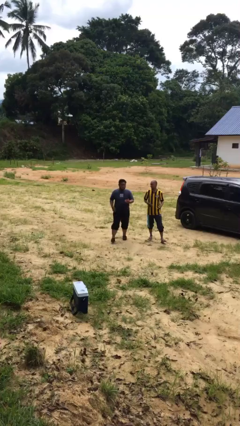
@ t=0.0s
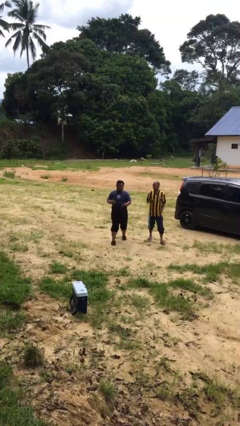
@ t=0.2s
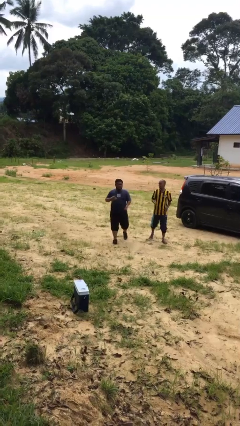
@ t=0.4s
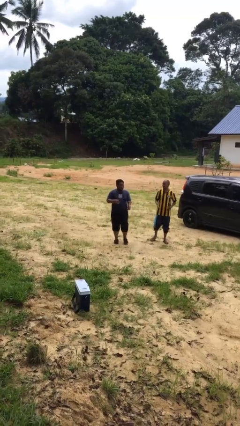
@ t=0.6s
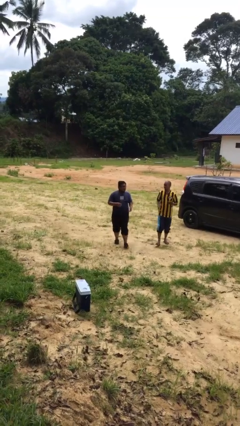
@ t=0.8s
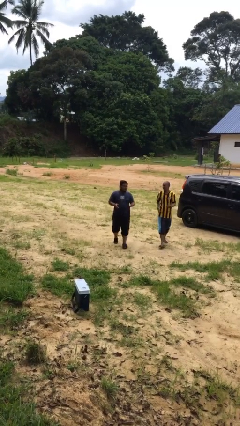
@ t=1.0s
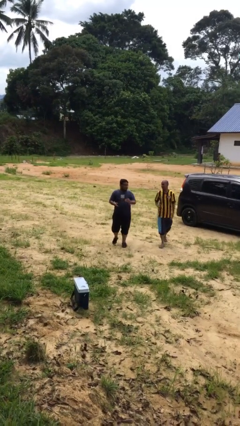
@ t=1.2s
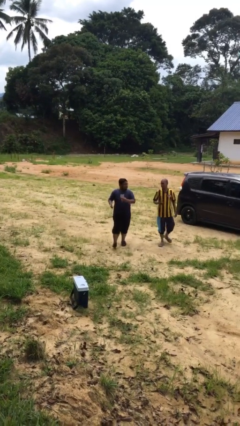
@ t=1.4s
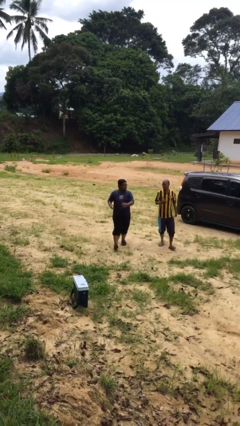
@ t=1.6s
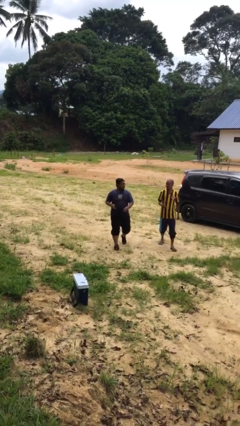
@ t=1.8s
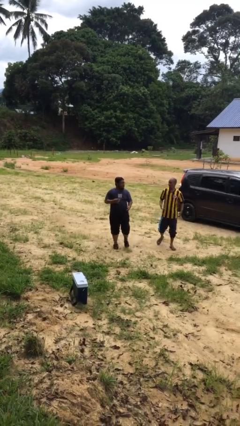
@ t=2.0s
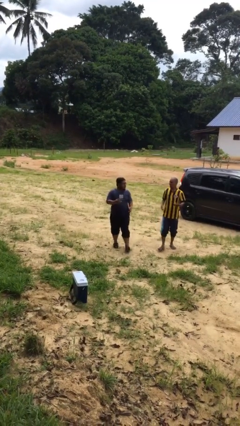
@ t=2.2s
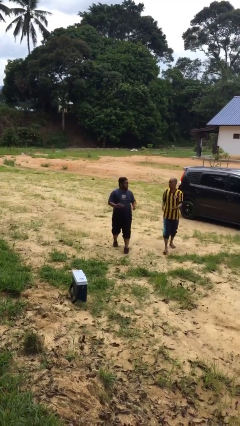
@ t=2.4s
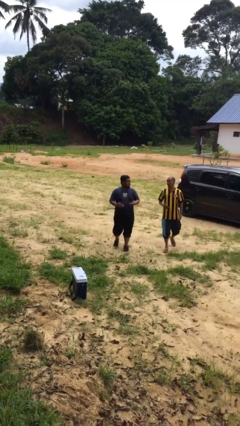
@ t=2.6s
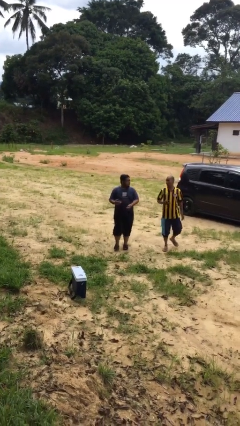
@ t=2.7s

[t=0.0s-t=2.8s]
person talks to person

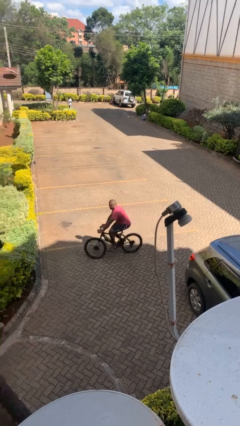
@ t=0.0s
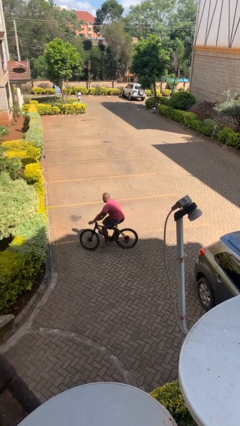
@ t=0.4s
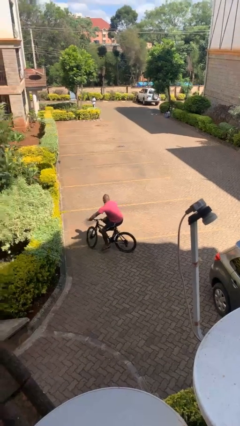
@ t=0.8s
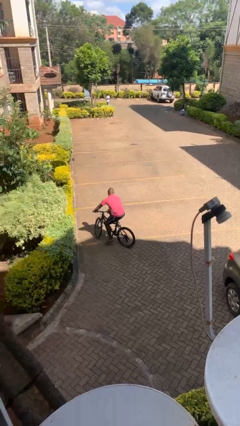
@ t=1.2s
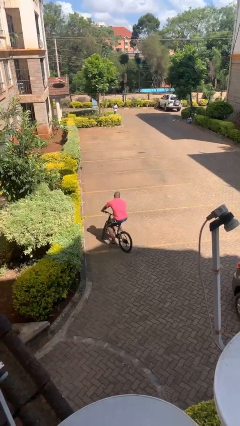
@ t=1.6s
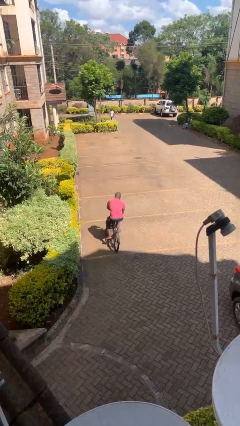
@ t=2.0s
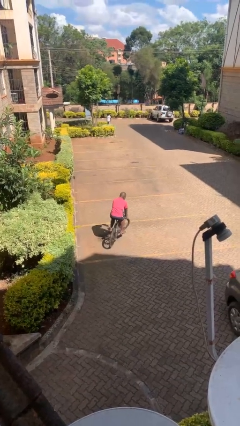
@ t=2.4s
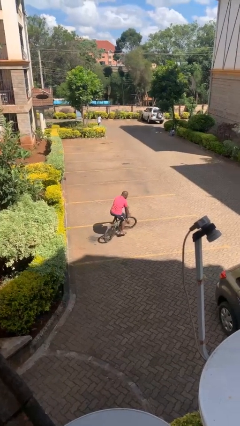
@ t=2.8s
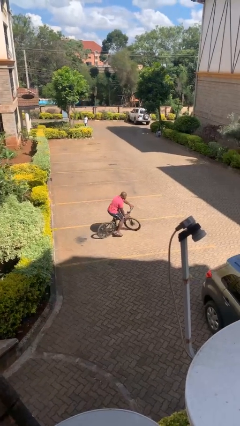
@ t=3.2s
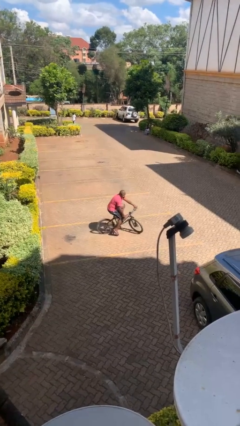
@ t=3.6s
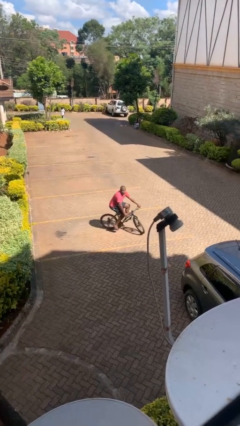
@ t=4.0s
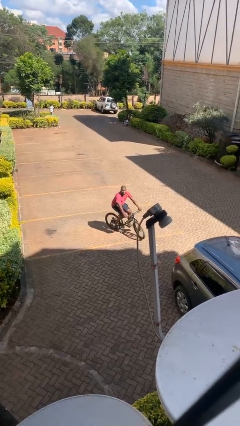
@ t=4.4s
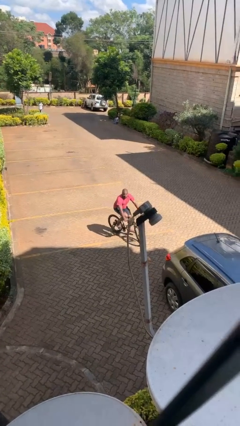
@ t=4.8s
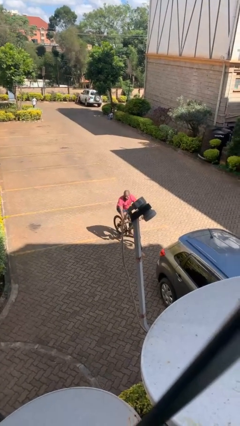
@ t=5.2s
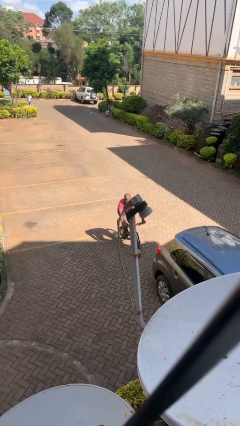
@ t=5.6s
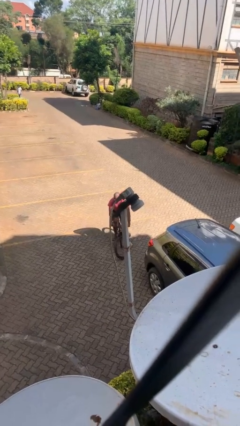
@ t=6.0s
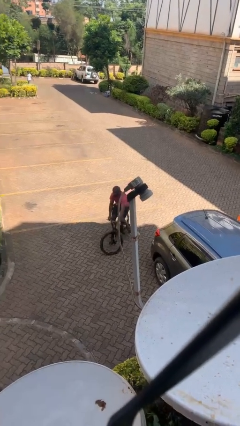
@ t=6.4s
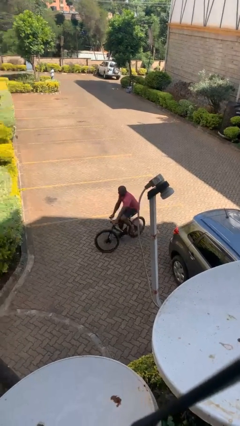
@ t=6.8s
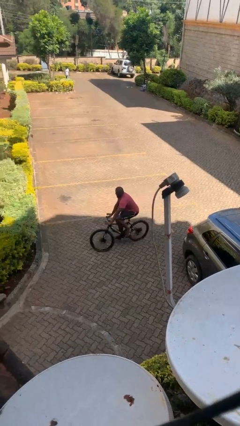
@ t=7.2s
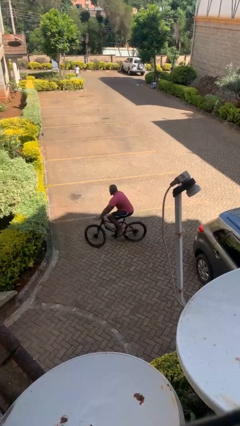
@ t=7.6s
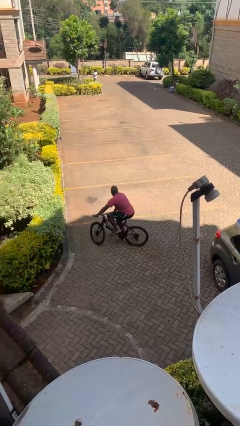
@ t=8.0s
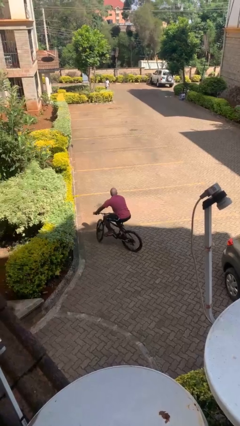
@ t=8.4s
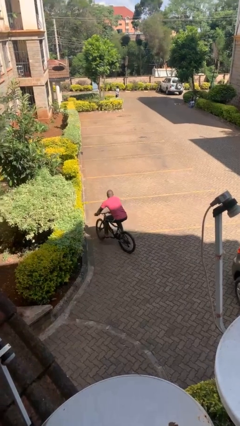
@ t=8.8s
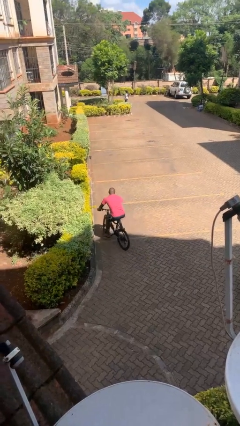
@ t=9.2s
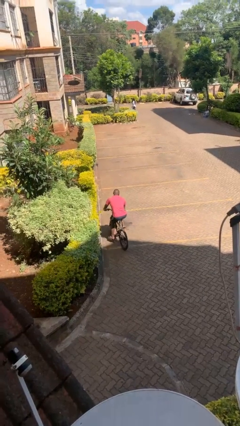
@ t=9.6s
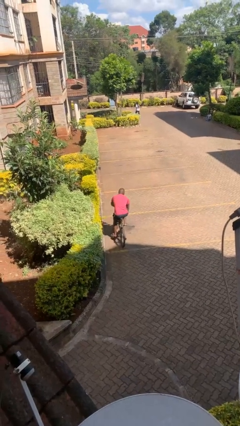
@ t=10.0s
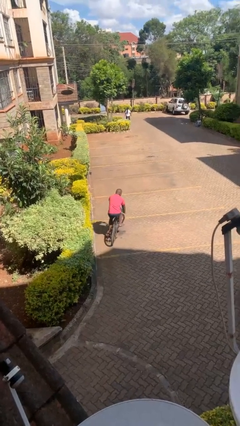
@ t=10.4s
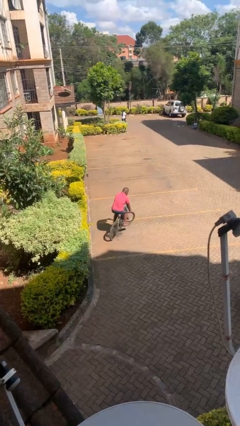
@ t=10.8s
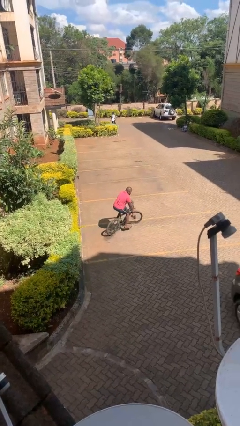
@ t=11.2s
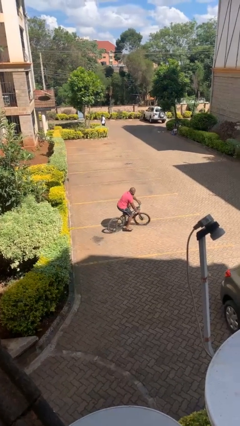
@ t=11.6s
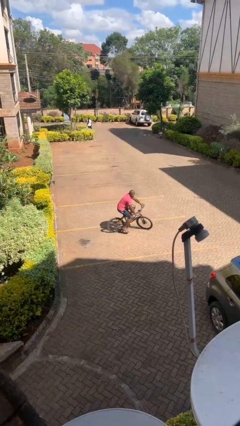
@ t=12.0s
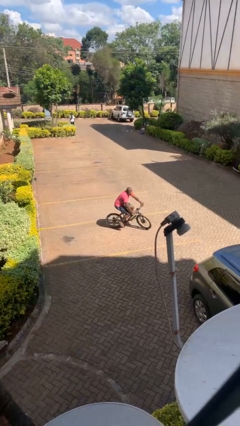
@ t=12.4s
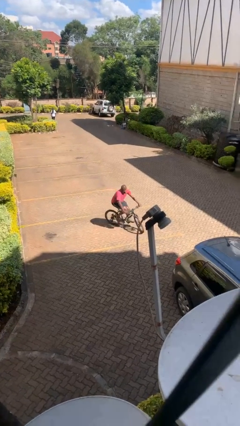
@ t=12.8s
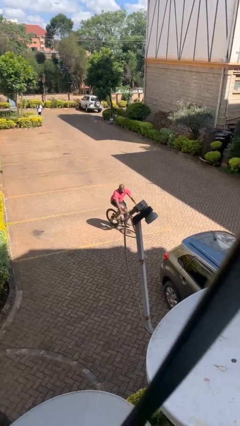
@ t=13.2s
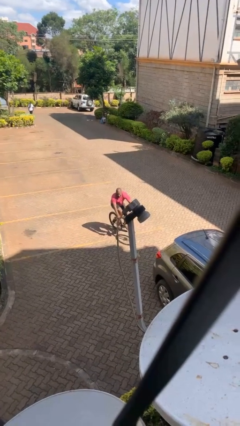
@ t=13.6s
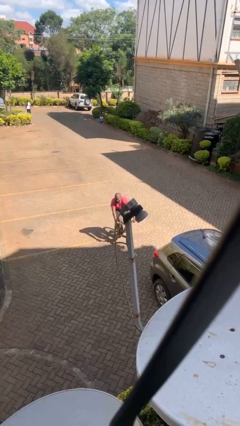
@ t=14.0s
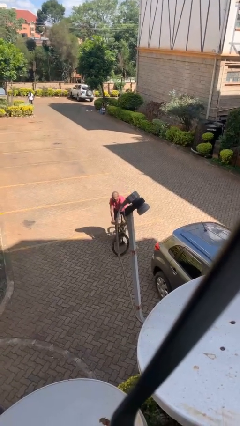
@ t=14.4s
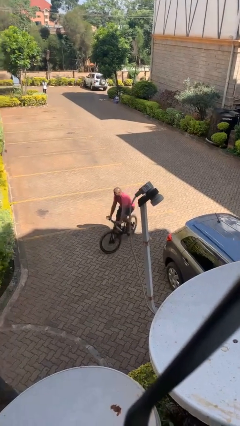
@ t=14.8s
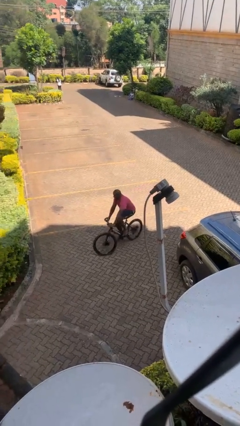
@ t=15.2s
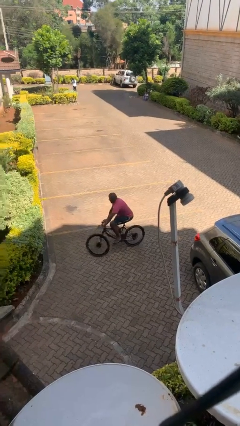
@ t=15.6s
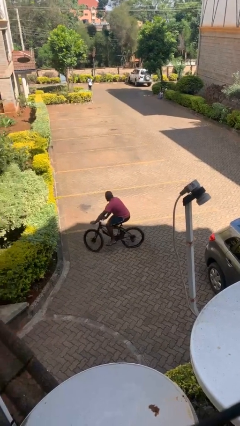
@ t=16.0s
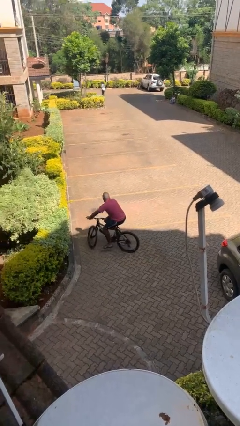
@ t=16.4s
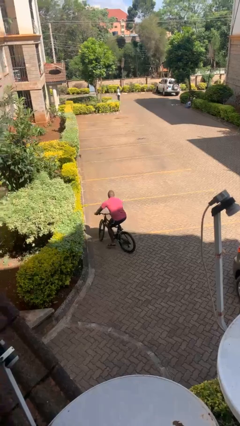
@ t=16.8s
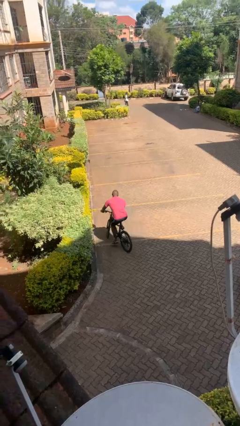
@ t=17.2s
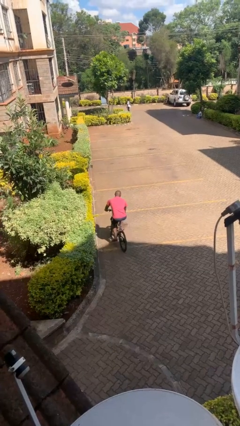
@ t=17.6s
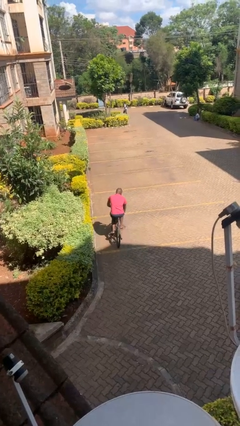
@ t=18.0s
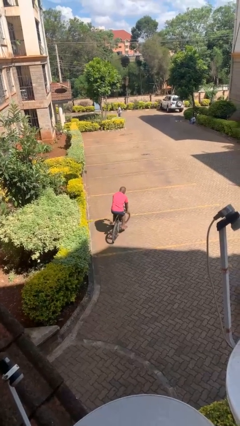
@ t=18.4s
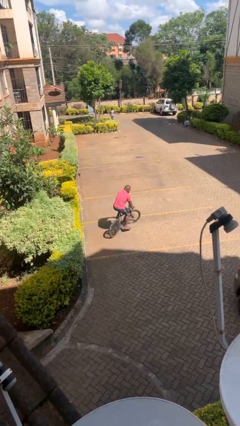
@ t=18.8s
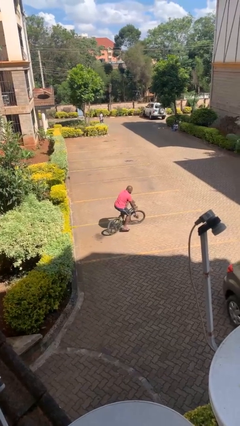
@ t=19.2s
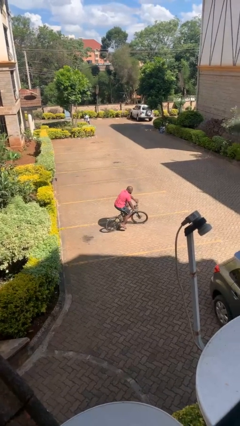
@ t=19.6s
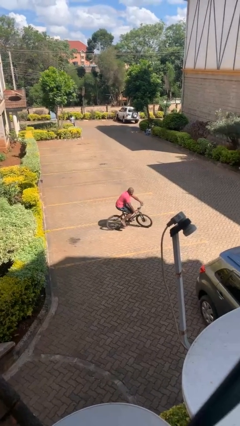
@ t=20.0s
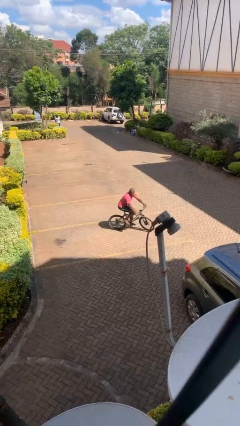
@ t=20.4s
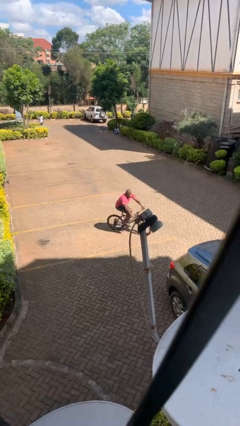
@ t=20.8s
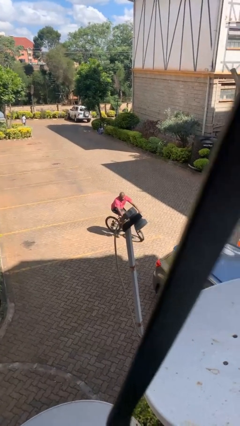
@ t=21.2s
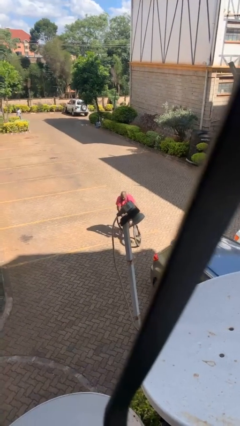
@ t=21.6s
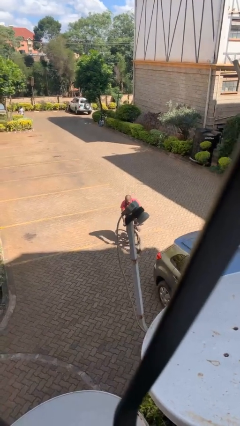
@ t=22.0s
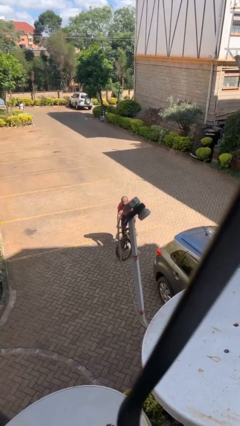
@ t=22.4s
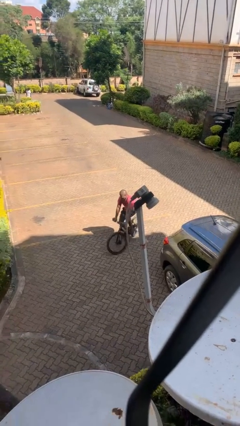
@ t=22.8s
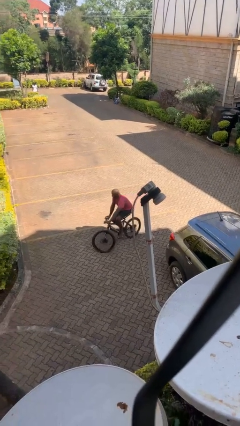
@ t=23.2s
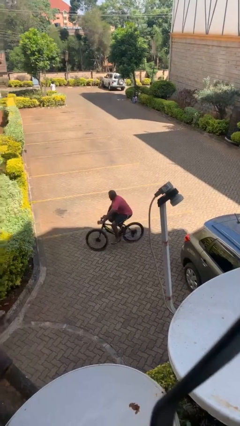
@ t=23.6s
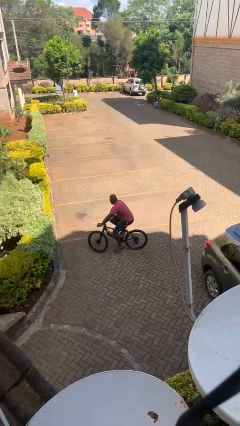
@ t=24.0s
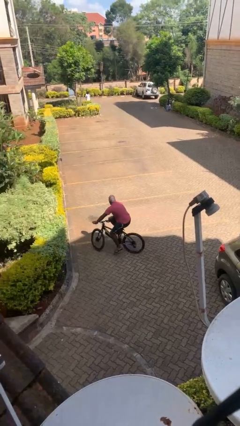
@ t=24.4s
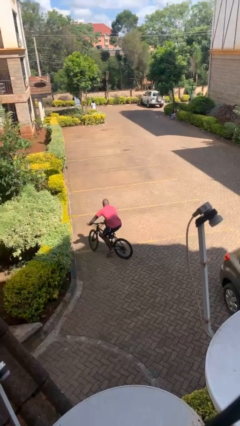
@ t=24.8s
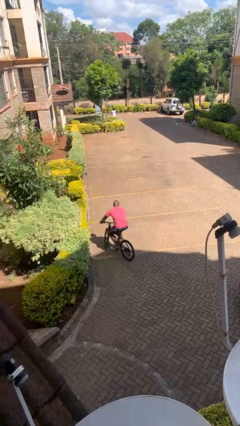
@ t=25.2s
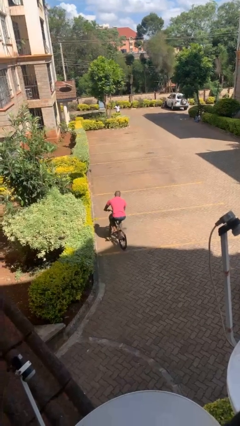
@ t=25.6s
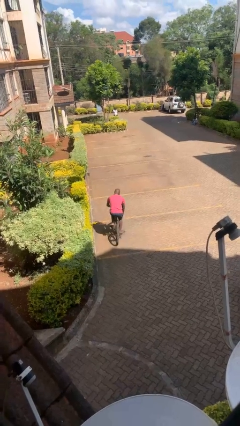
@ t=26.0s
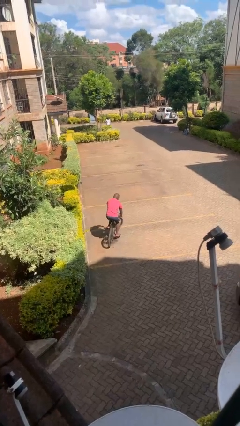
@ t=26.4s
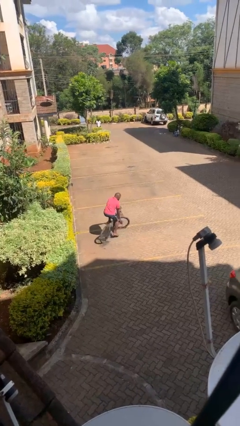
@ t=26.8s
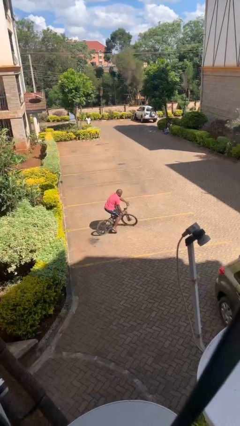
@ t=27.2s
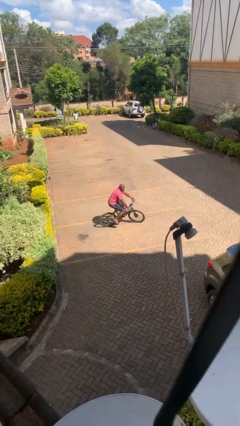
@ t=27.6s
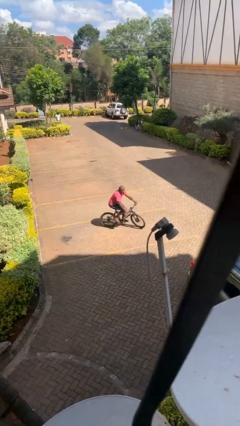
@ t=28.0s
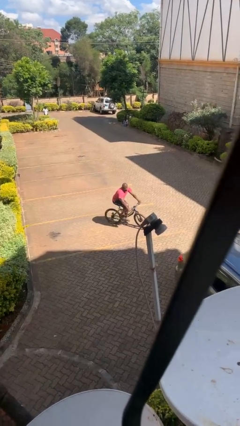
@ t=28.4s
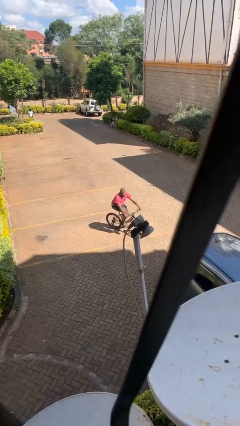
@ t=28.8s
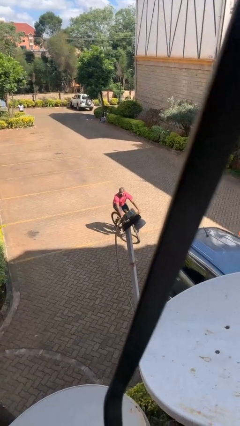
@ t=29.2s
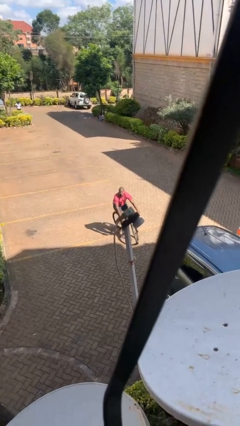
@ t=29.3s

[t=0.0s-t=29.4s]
person rides bicycle

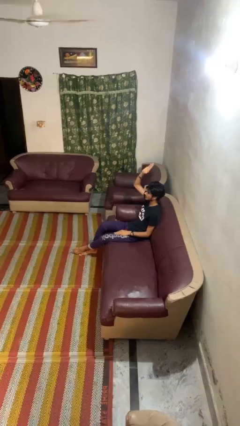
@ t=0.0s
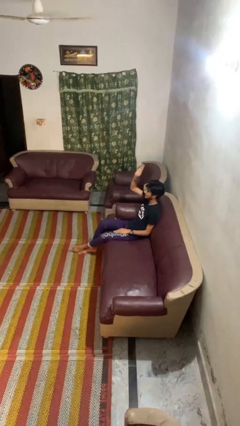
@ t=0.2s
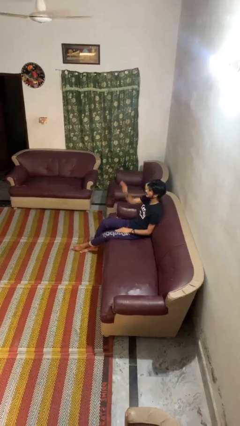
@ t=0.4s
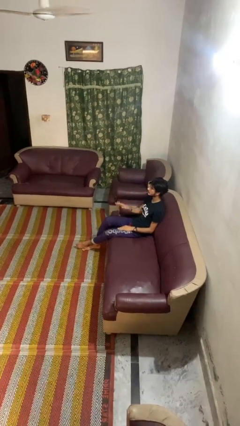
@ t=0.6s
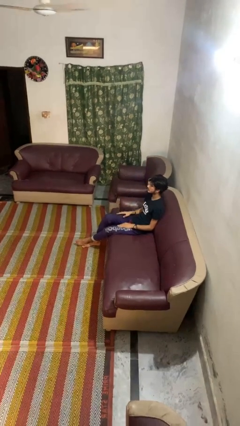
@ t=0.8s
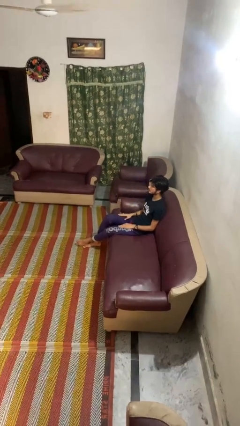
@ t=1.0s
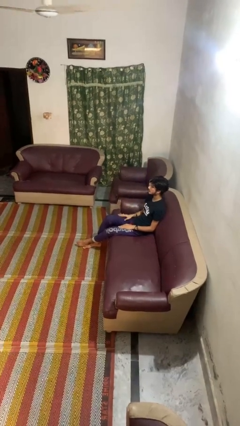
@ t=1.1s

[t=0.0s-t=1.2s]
person gestures lower hand
